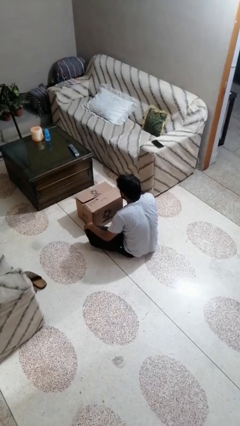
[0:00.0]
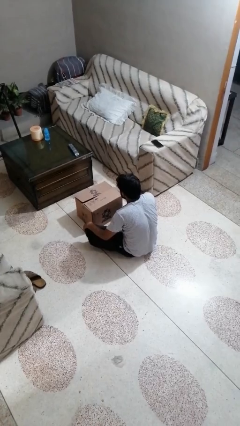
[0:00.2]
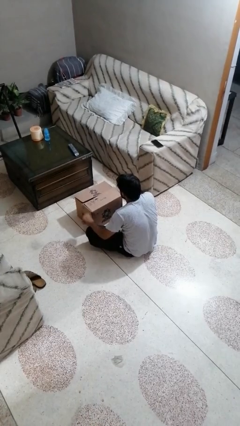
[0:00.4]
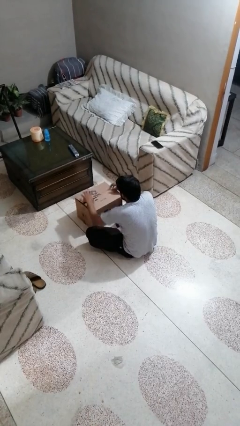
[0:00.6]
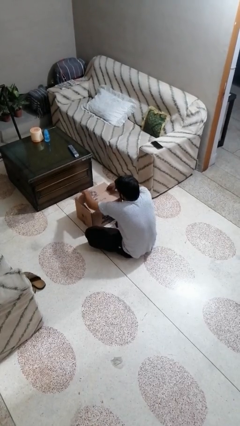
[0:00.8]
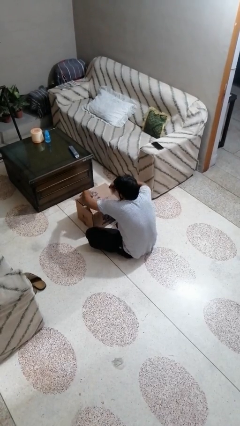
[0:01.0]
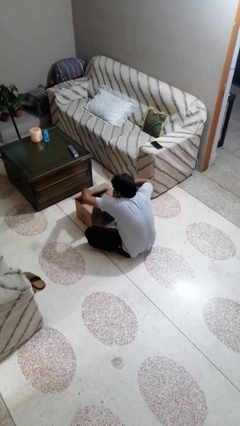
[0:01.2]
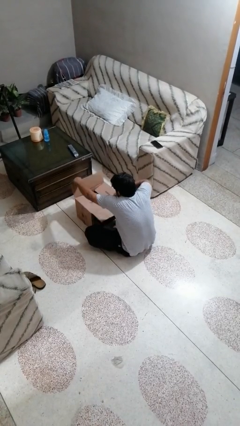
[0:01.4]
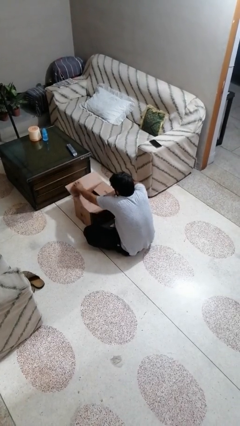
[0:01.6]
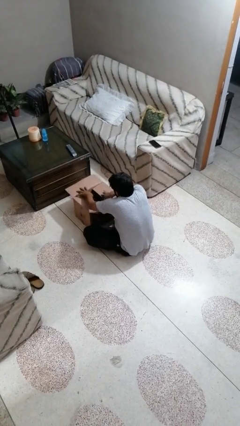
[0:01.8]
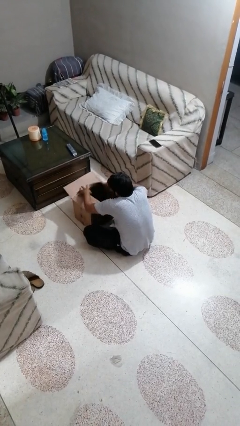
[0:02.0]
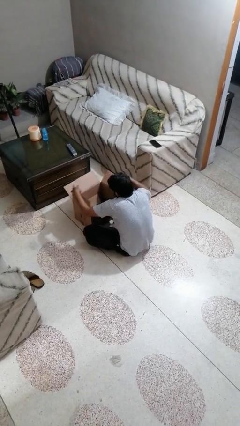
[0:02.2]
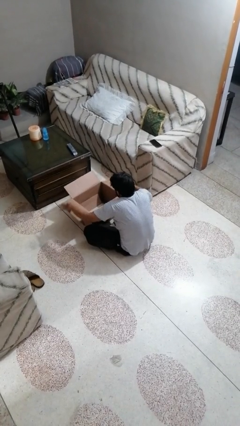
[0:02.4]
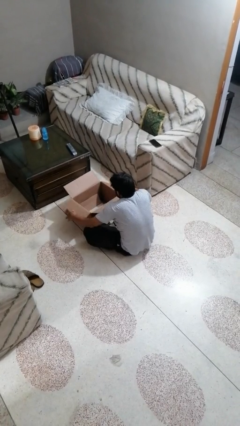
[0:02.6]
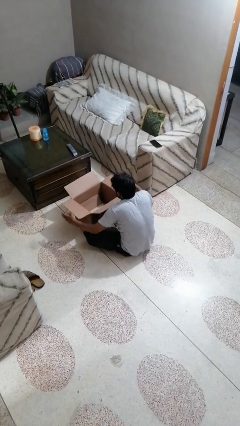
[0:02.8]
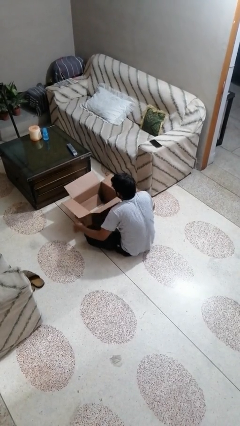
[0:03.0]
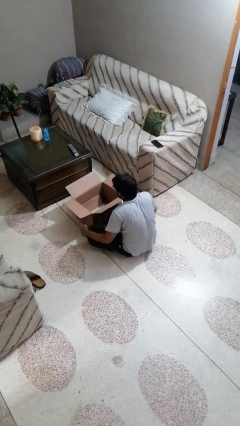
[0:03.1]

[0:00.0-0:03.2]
person opens box

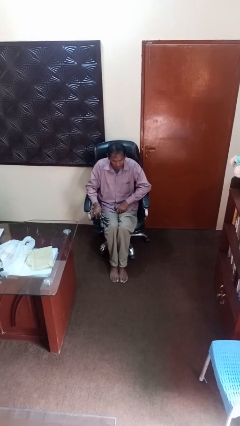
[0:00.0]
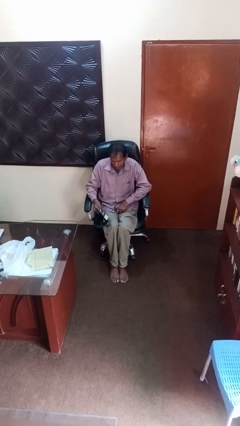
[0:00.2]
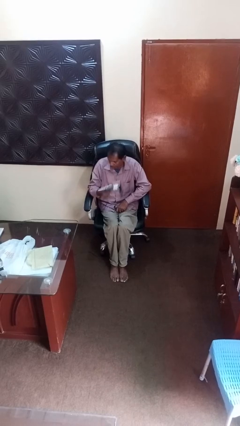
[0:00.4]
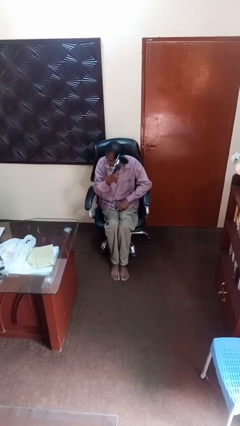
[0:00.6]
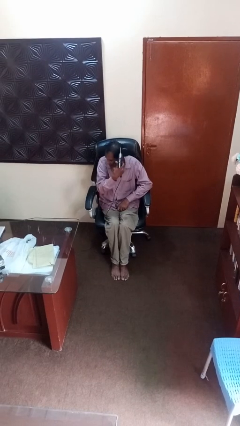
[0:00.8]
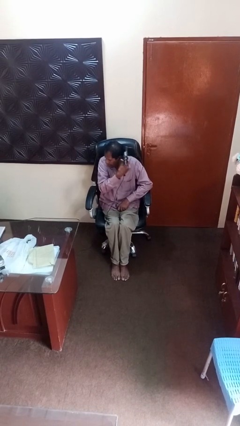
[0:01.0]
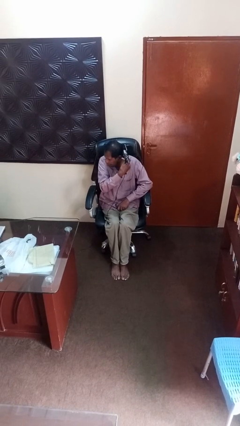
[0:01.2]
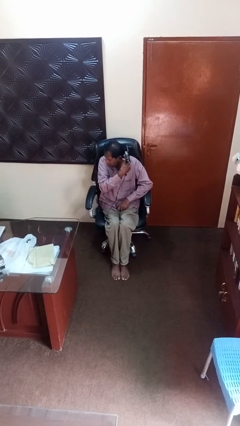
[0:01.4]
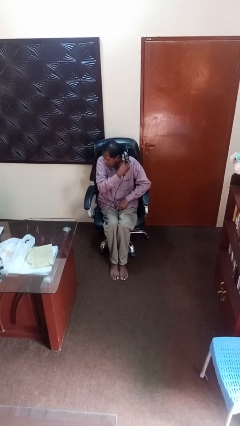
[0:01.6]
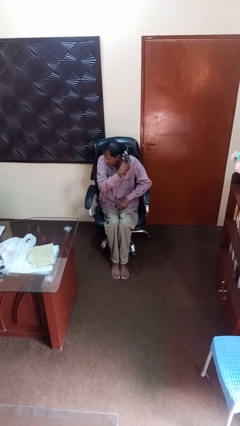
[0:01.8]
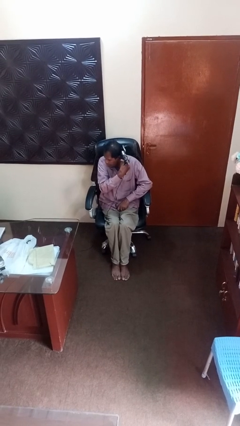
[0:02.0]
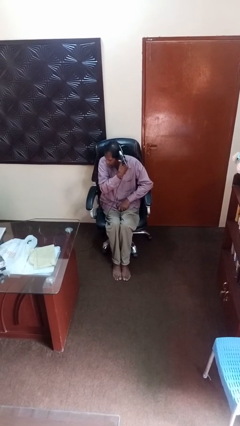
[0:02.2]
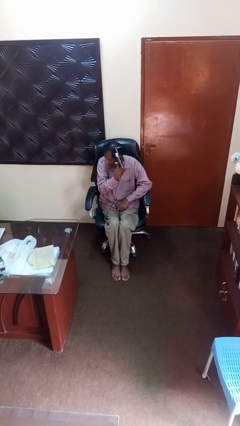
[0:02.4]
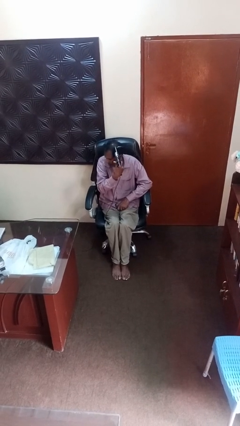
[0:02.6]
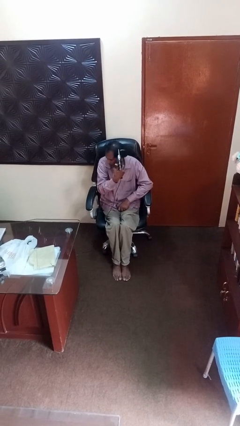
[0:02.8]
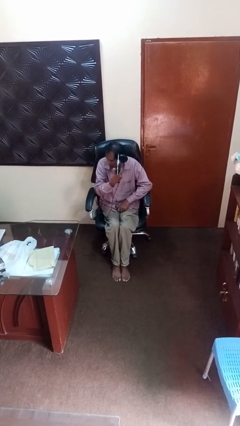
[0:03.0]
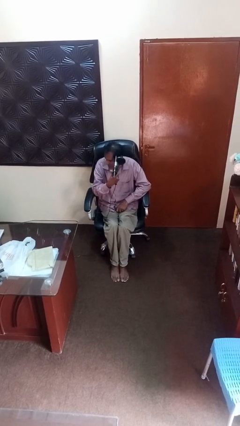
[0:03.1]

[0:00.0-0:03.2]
person dries hair with hairdryer

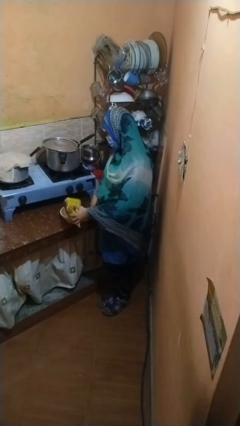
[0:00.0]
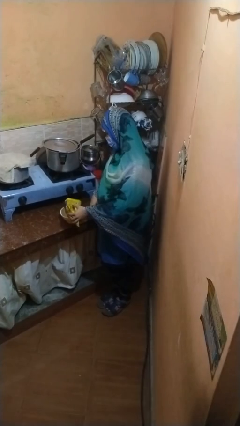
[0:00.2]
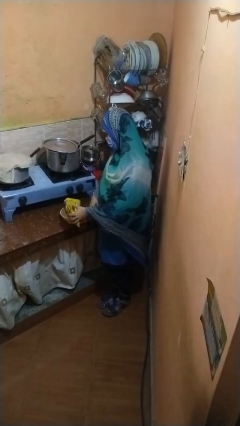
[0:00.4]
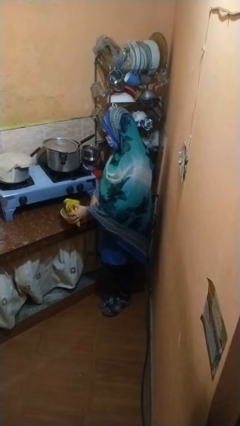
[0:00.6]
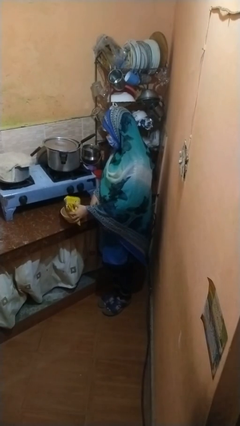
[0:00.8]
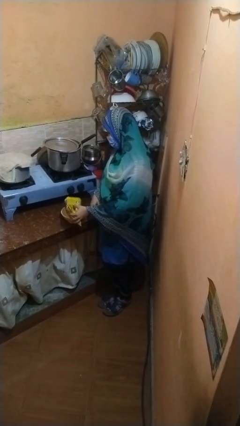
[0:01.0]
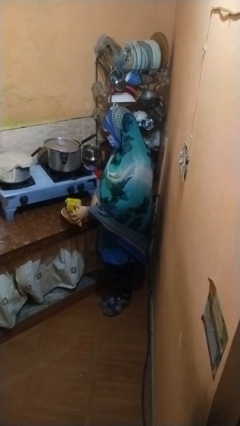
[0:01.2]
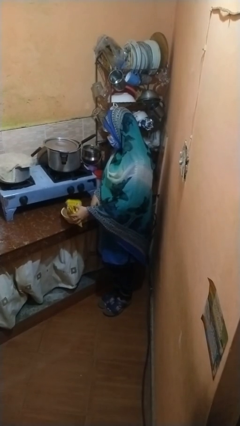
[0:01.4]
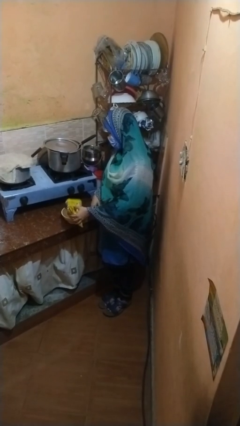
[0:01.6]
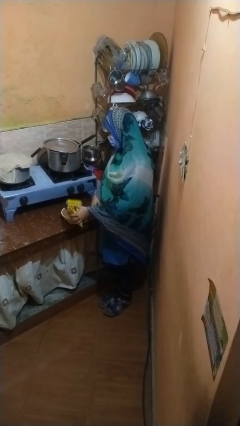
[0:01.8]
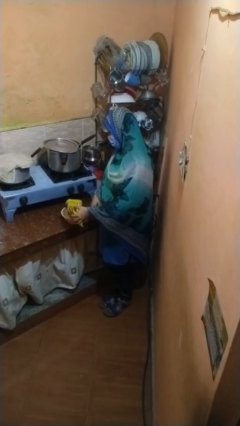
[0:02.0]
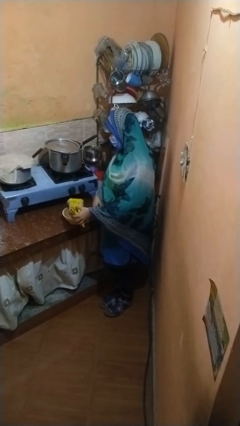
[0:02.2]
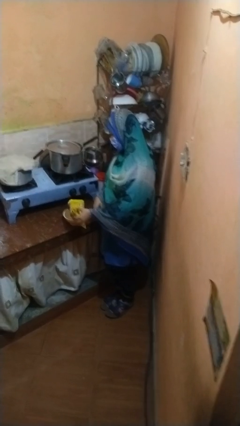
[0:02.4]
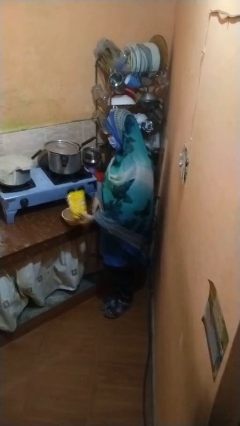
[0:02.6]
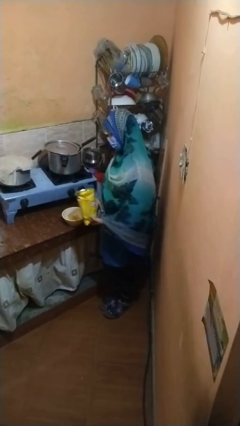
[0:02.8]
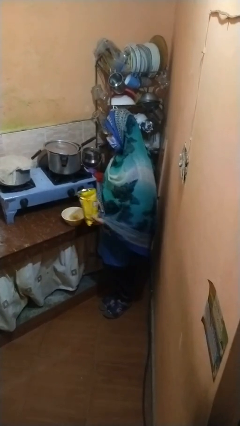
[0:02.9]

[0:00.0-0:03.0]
person pours into bowl

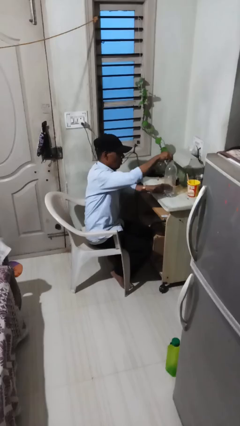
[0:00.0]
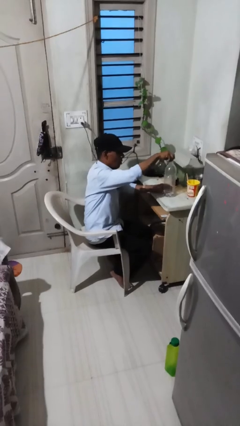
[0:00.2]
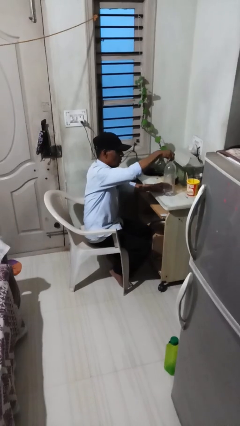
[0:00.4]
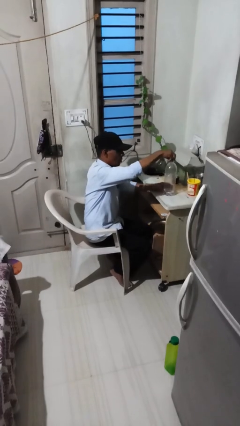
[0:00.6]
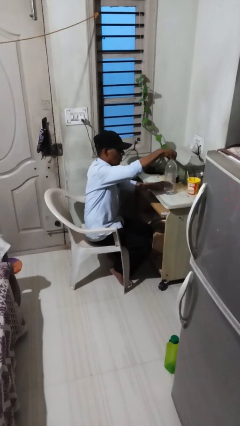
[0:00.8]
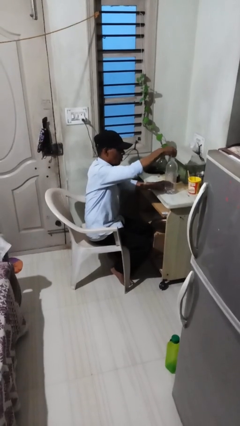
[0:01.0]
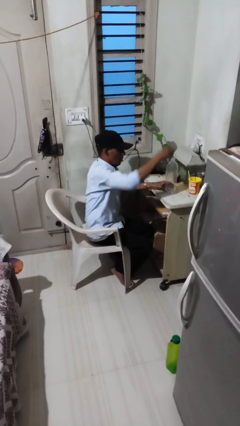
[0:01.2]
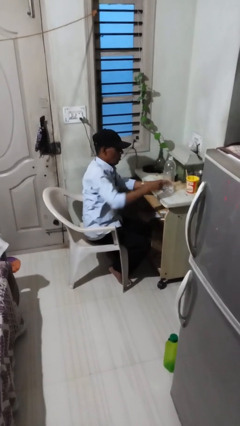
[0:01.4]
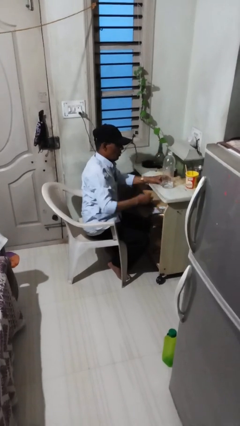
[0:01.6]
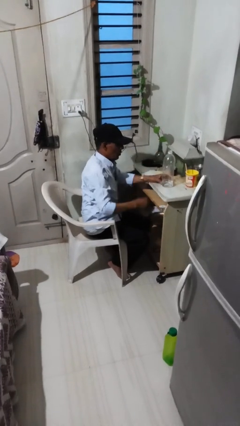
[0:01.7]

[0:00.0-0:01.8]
person unscrews lid from bottle

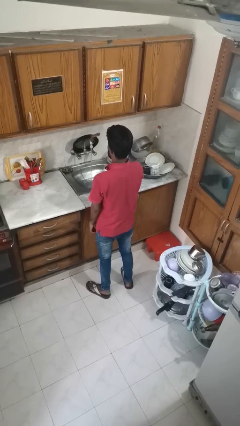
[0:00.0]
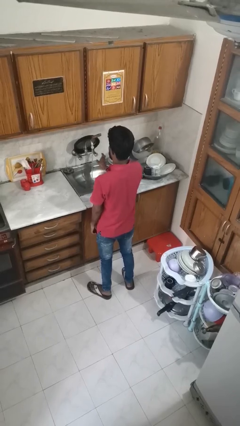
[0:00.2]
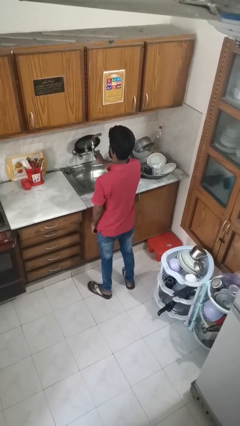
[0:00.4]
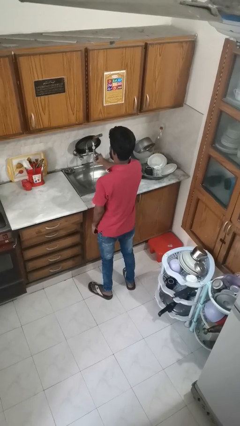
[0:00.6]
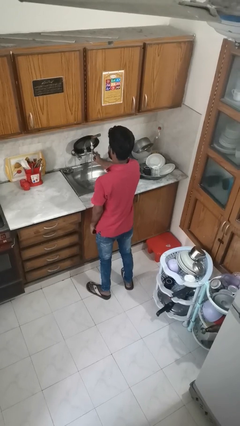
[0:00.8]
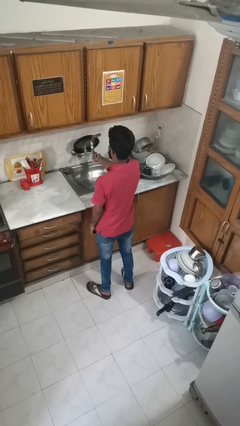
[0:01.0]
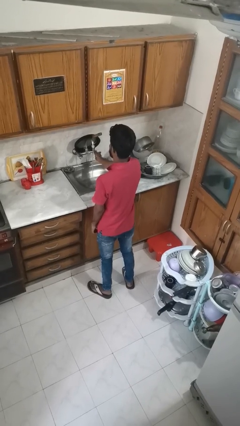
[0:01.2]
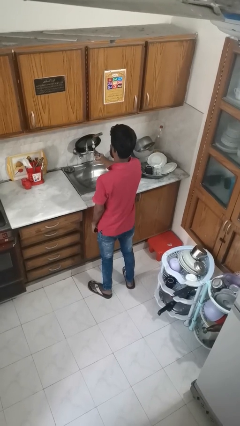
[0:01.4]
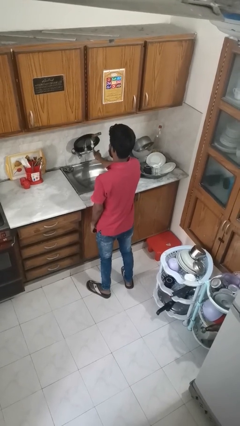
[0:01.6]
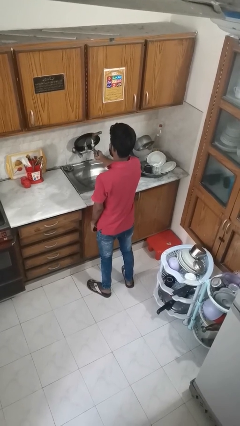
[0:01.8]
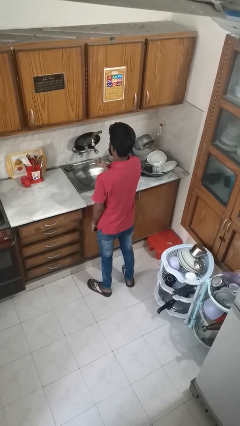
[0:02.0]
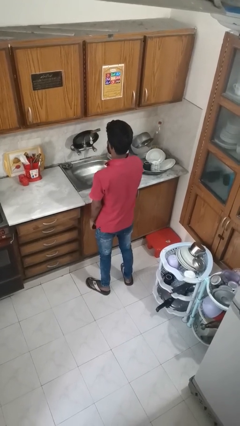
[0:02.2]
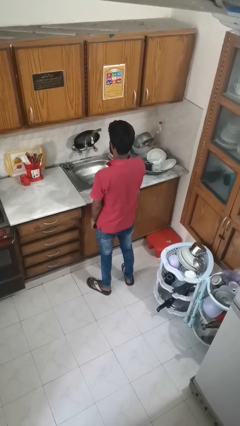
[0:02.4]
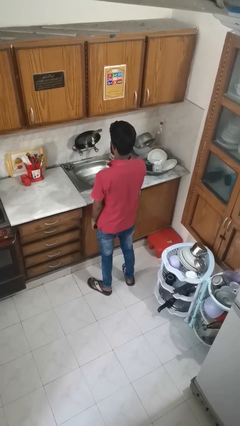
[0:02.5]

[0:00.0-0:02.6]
person turns off faucet

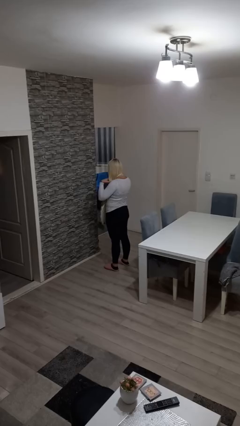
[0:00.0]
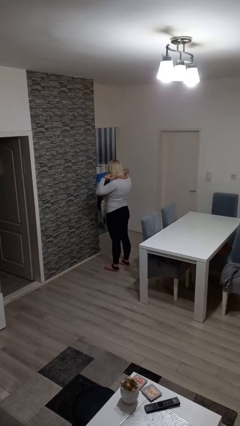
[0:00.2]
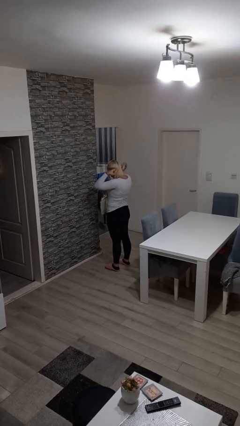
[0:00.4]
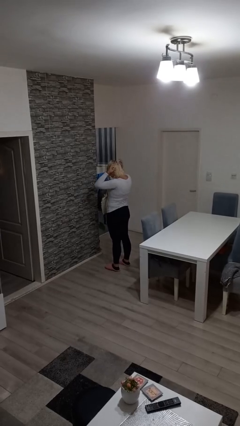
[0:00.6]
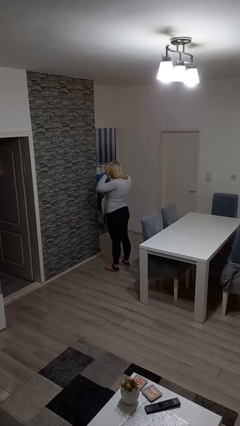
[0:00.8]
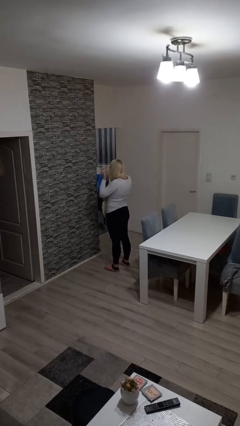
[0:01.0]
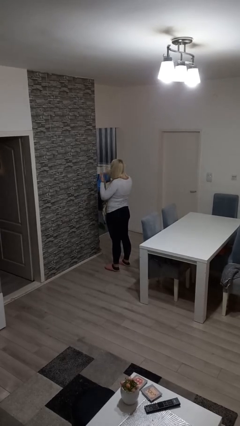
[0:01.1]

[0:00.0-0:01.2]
person takes off apron

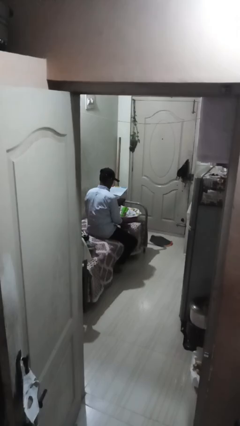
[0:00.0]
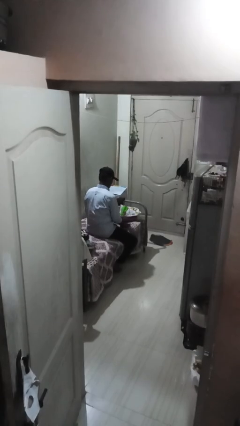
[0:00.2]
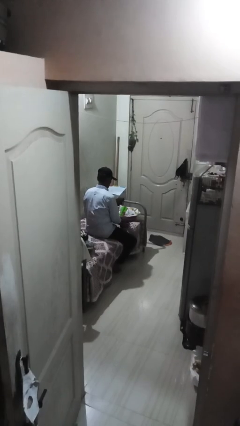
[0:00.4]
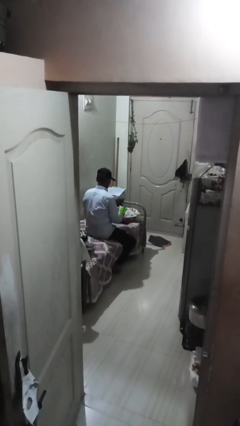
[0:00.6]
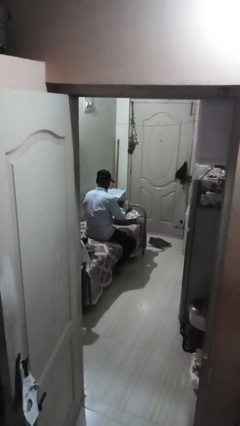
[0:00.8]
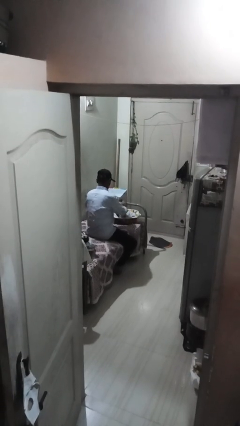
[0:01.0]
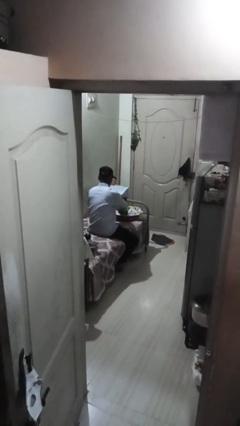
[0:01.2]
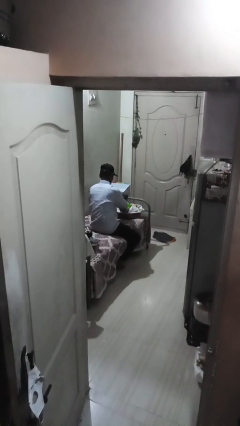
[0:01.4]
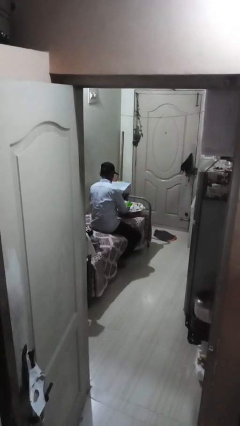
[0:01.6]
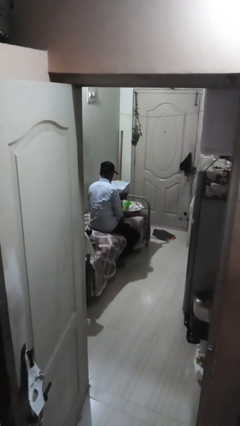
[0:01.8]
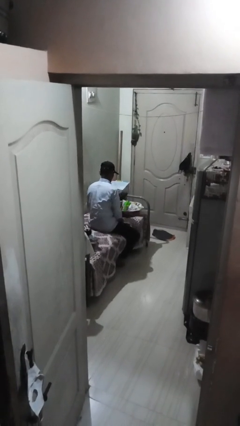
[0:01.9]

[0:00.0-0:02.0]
person puts object into bag
